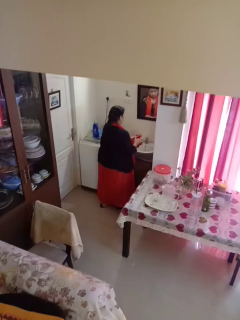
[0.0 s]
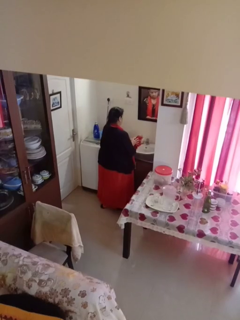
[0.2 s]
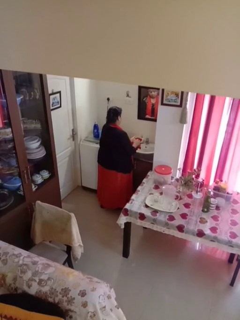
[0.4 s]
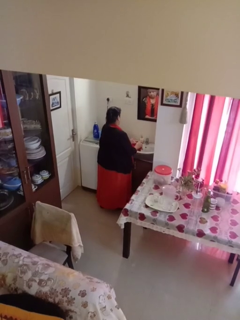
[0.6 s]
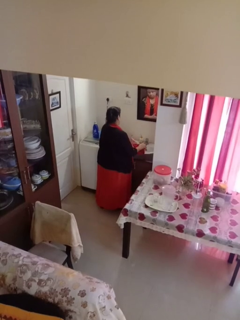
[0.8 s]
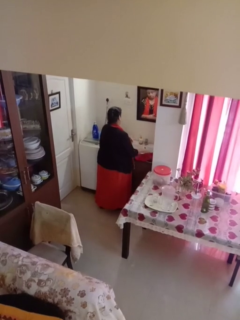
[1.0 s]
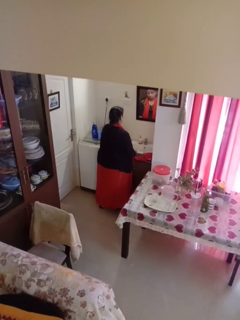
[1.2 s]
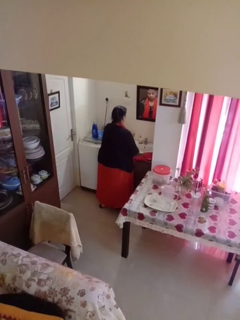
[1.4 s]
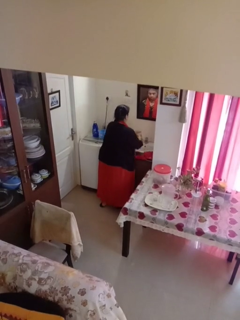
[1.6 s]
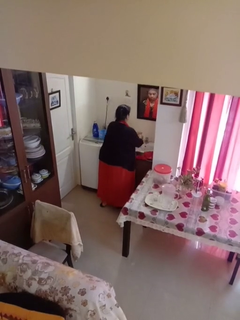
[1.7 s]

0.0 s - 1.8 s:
person dries hands with towel

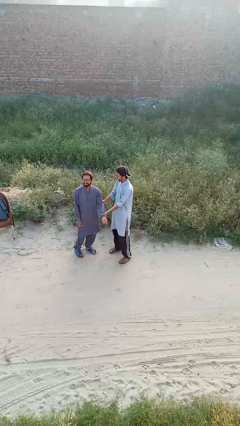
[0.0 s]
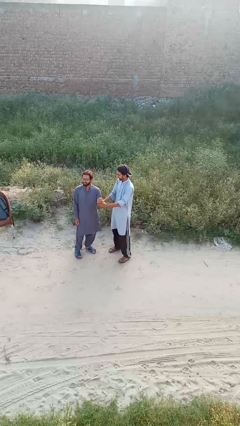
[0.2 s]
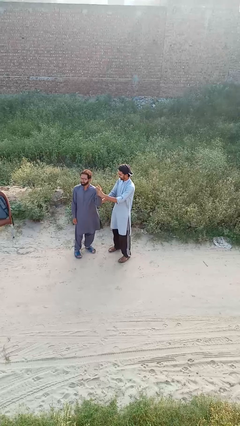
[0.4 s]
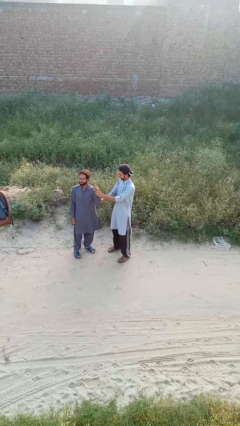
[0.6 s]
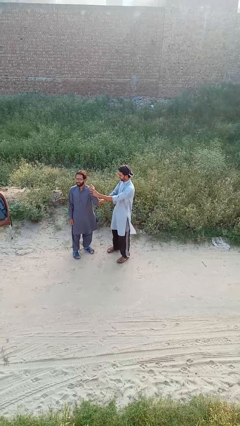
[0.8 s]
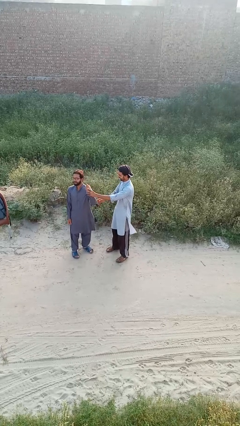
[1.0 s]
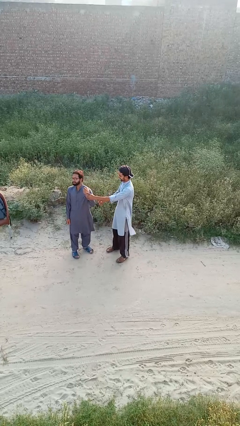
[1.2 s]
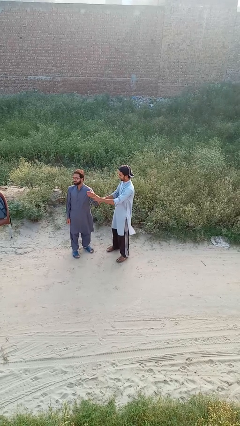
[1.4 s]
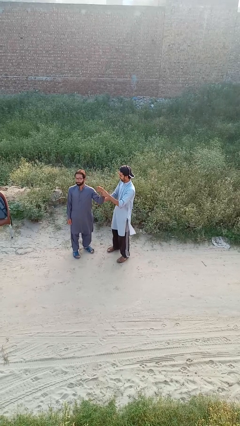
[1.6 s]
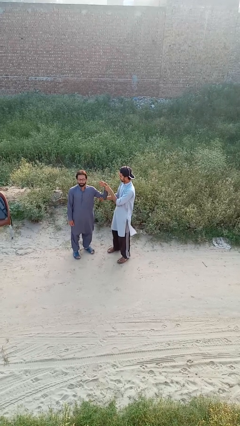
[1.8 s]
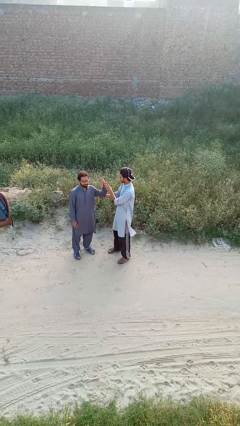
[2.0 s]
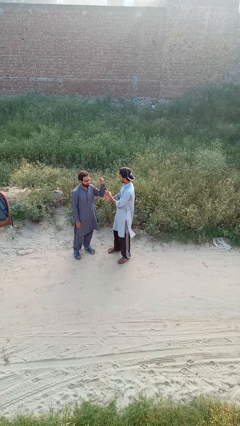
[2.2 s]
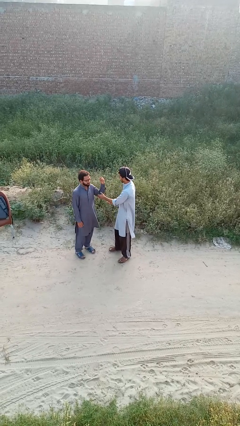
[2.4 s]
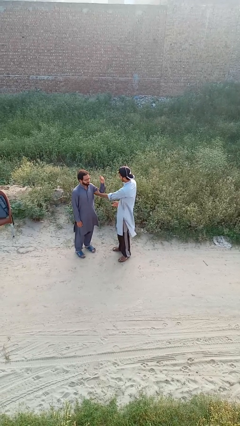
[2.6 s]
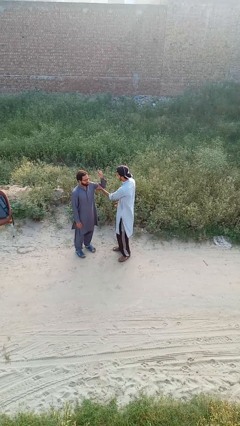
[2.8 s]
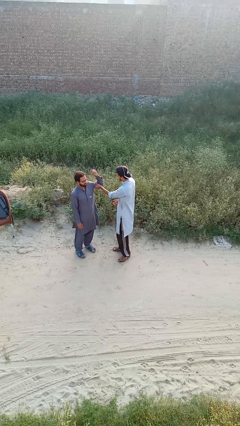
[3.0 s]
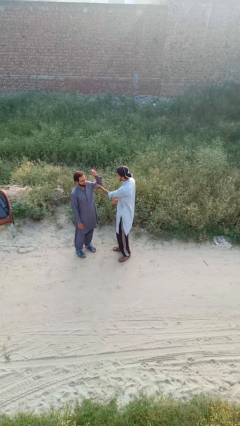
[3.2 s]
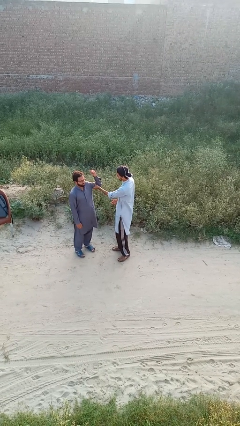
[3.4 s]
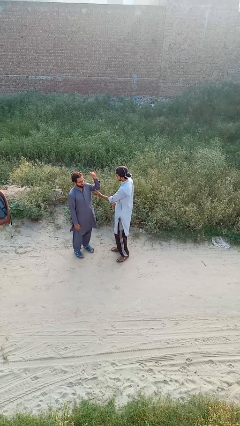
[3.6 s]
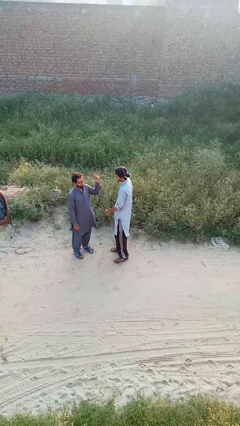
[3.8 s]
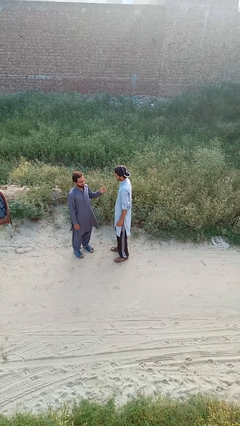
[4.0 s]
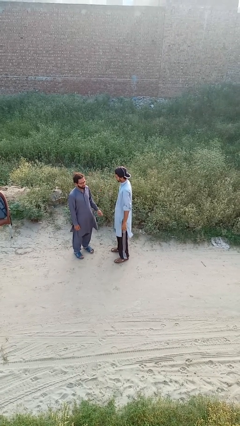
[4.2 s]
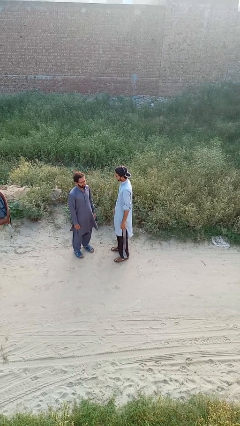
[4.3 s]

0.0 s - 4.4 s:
person grabs person by bicep

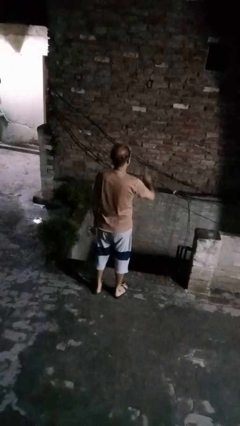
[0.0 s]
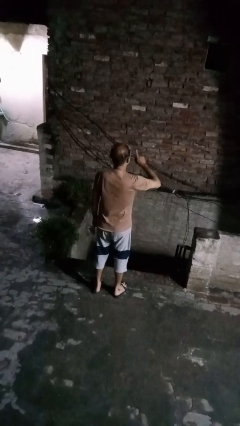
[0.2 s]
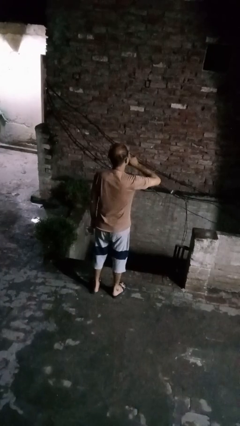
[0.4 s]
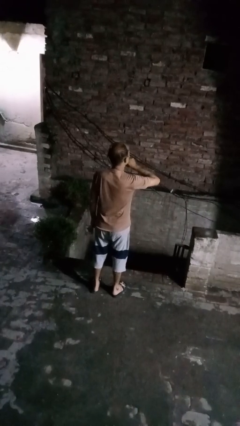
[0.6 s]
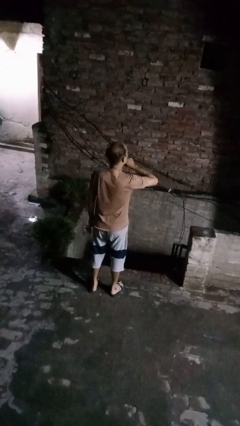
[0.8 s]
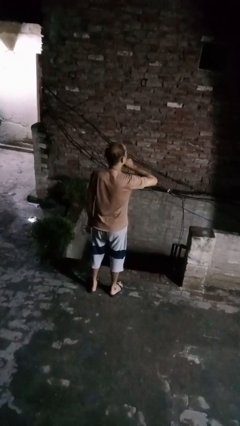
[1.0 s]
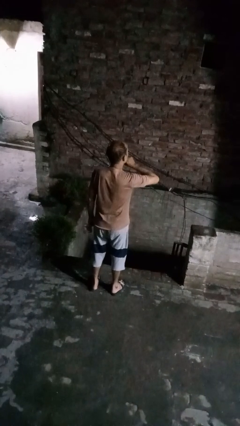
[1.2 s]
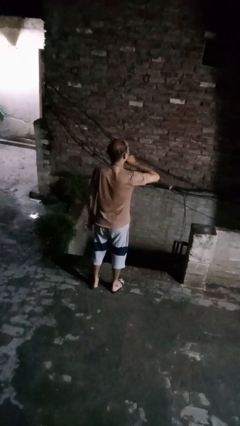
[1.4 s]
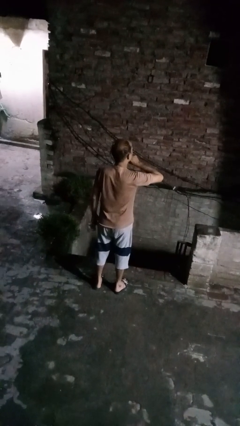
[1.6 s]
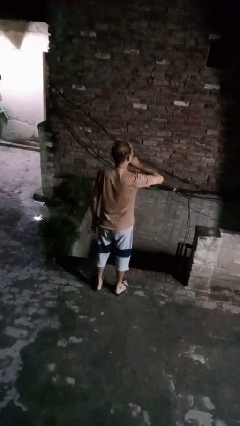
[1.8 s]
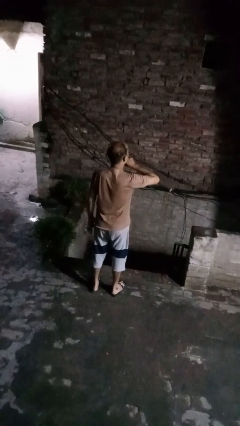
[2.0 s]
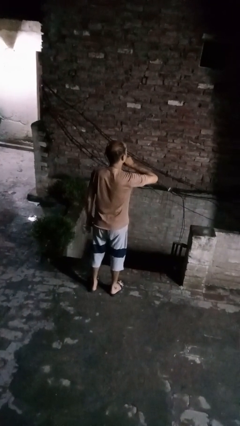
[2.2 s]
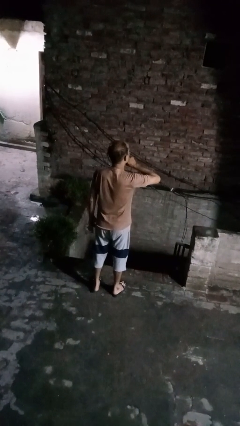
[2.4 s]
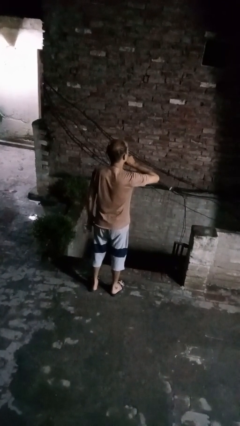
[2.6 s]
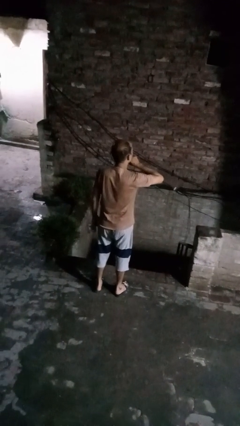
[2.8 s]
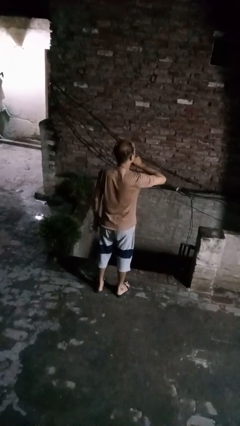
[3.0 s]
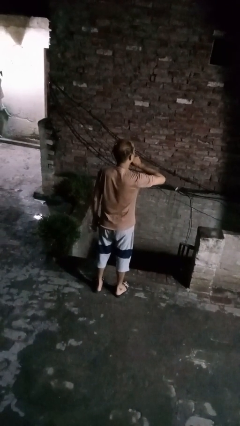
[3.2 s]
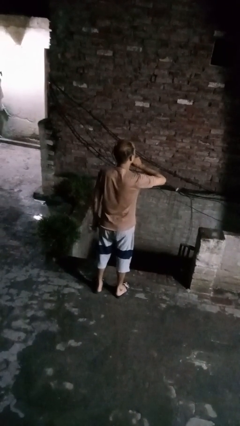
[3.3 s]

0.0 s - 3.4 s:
person gestures be quiet

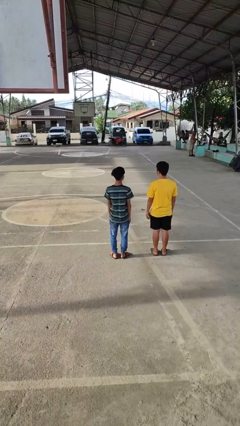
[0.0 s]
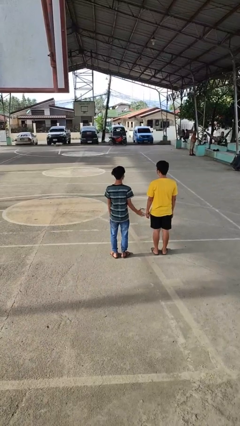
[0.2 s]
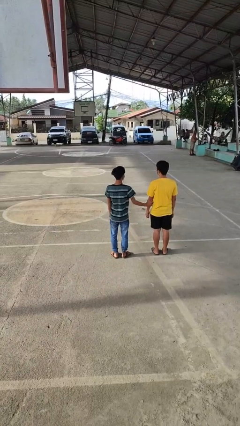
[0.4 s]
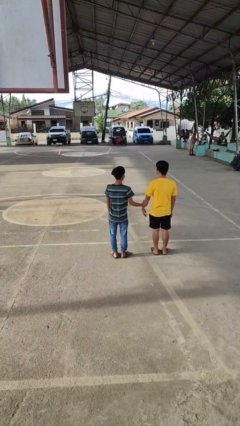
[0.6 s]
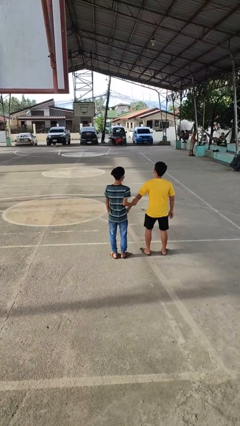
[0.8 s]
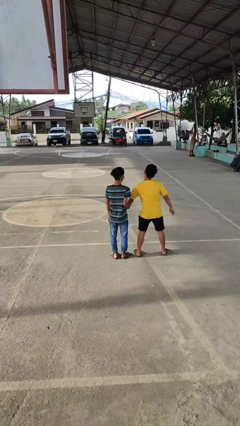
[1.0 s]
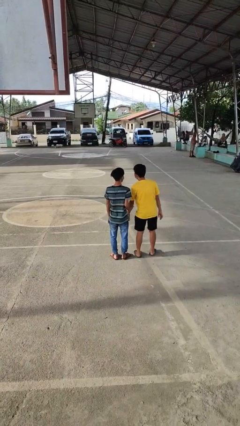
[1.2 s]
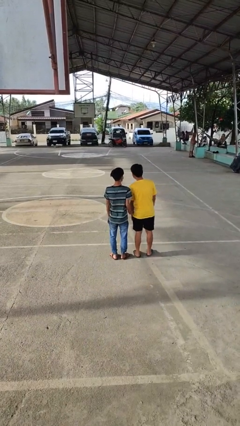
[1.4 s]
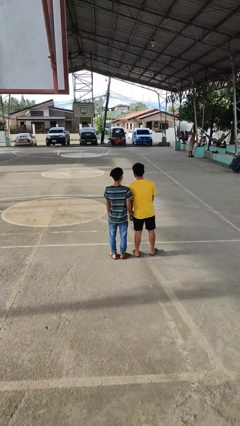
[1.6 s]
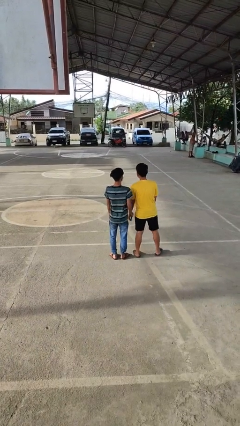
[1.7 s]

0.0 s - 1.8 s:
person grabs person by forearm

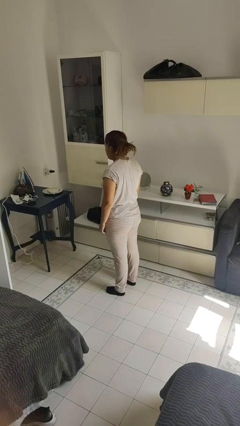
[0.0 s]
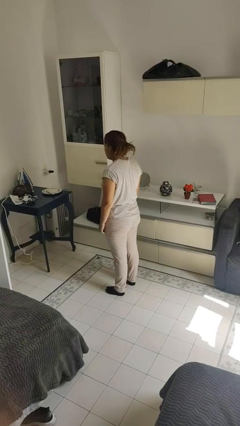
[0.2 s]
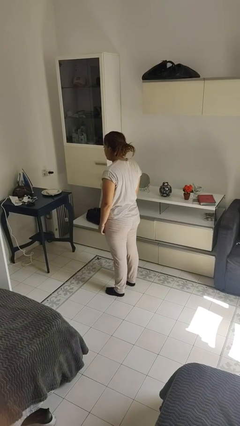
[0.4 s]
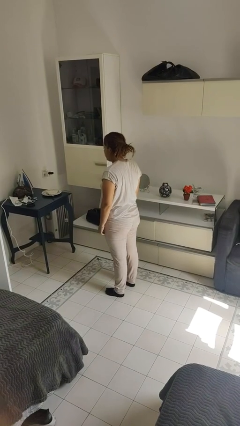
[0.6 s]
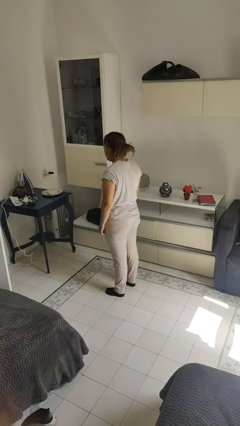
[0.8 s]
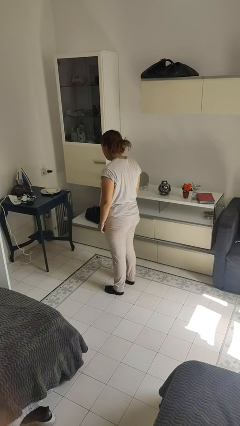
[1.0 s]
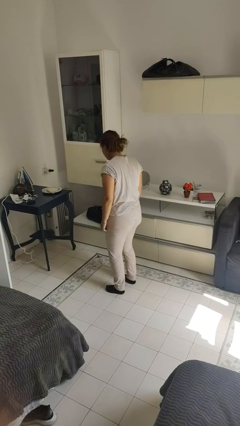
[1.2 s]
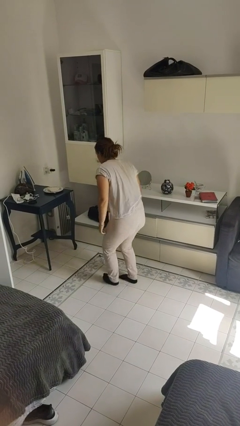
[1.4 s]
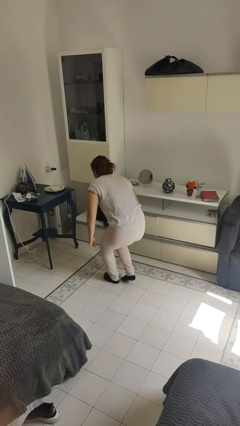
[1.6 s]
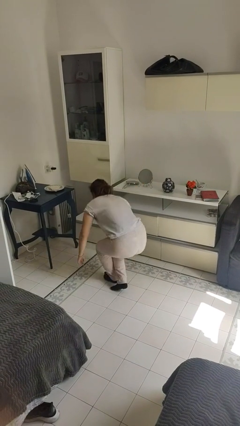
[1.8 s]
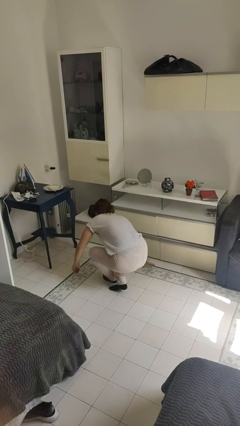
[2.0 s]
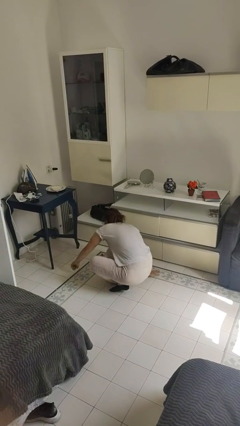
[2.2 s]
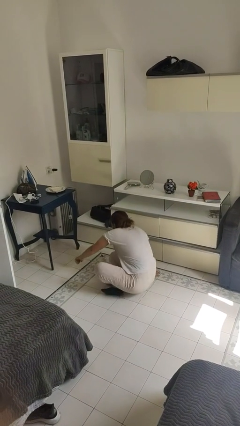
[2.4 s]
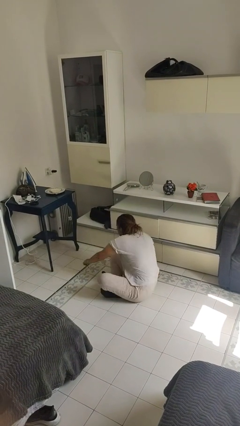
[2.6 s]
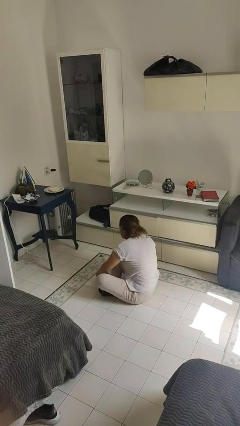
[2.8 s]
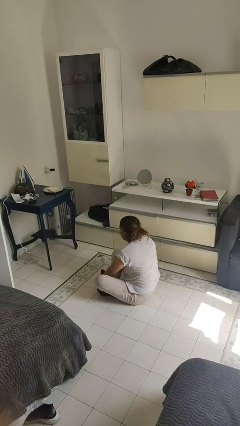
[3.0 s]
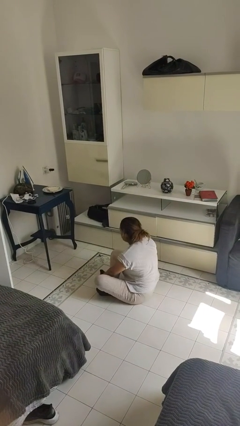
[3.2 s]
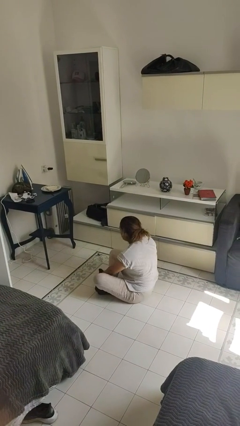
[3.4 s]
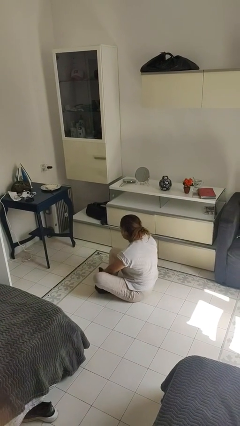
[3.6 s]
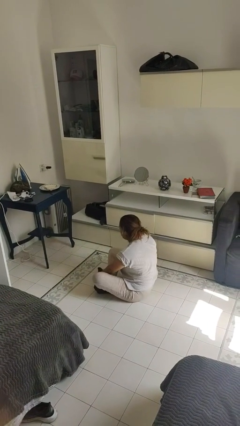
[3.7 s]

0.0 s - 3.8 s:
person sits crisscross

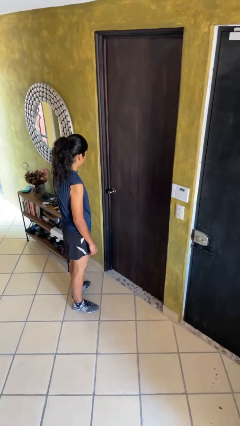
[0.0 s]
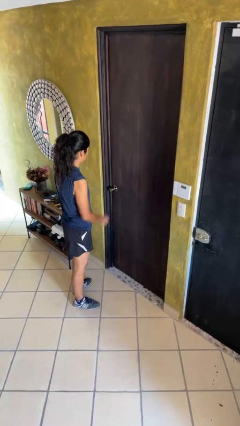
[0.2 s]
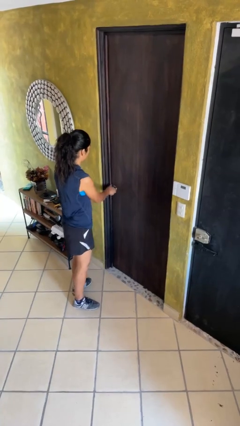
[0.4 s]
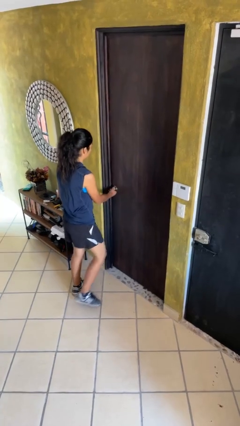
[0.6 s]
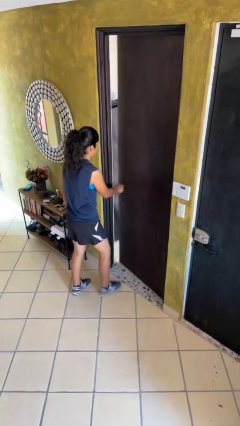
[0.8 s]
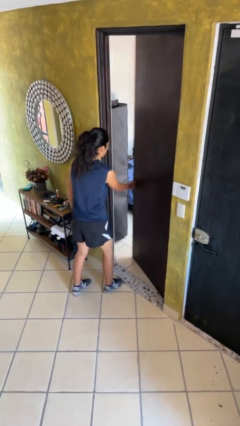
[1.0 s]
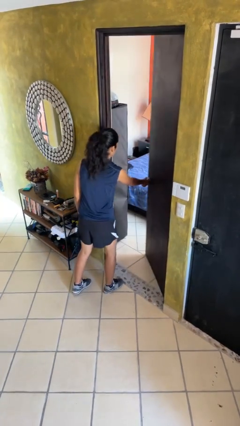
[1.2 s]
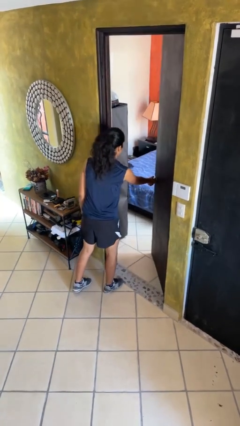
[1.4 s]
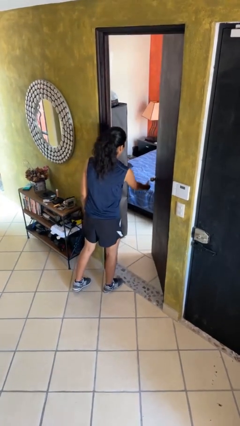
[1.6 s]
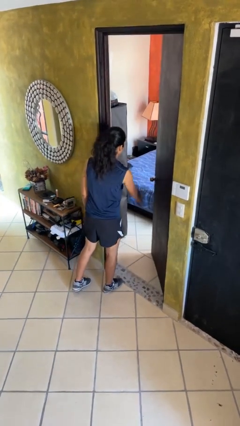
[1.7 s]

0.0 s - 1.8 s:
person opens facility door

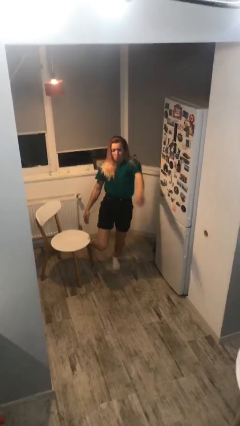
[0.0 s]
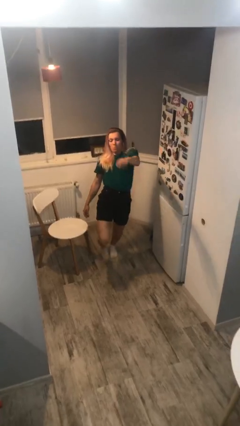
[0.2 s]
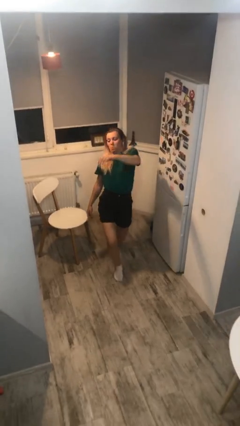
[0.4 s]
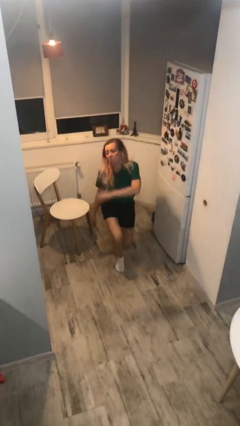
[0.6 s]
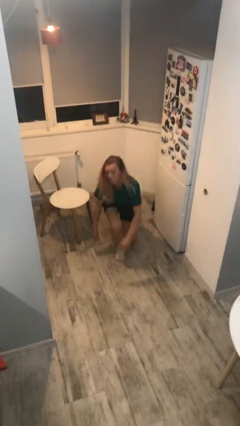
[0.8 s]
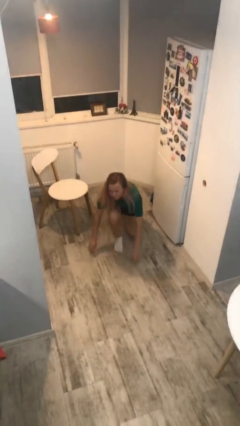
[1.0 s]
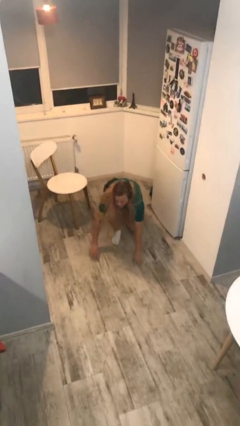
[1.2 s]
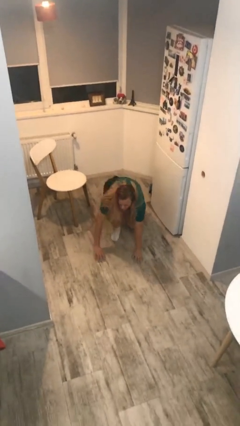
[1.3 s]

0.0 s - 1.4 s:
person trips on object on floor
